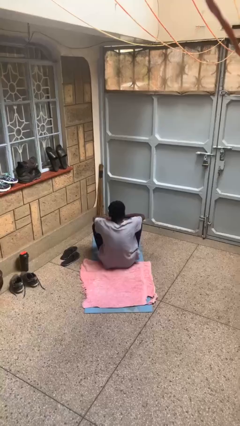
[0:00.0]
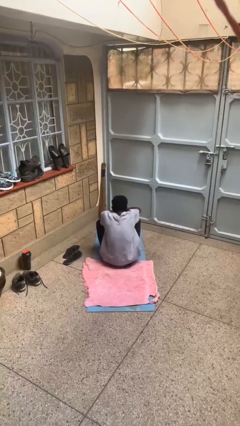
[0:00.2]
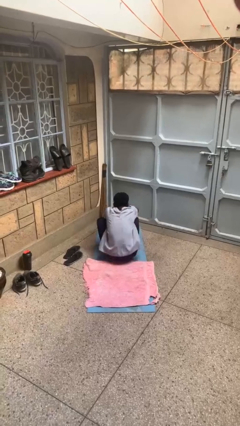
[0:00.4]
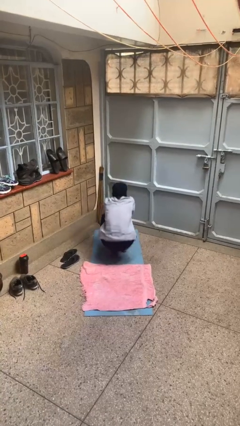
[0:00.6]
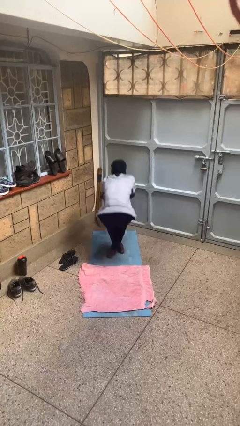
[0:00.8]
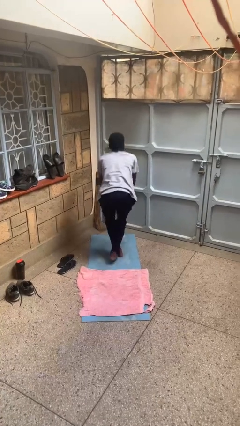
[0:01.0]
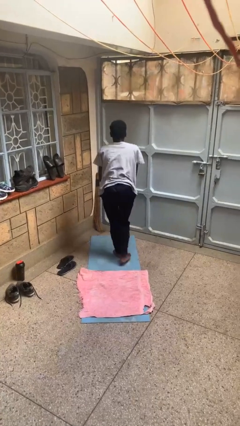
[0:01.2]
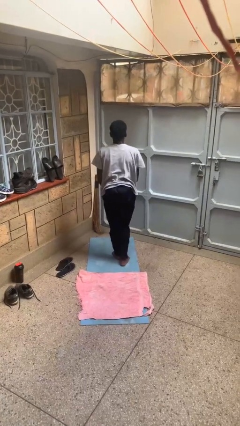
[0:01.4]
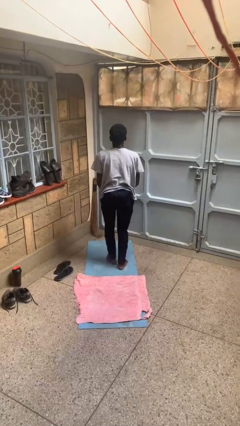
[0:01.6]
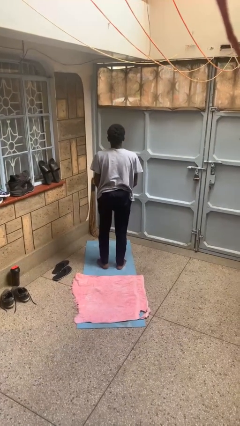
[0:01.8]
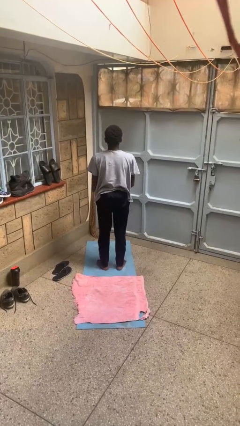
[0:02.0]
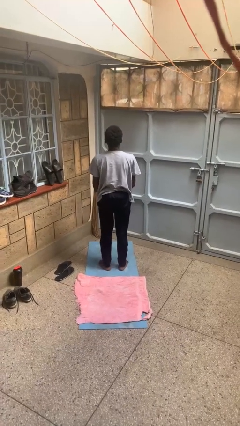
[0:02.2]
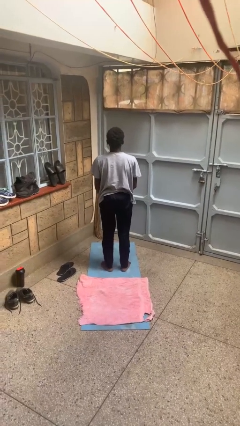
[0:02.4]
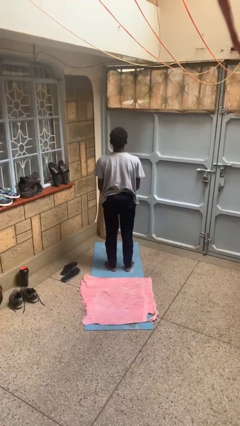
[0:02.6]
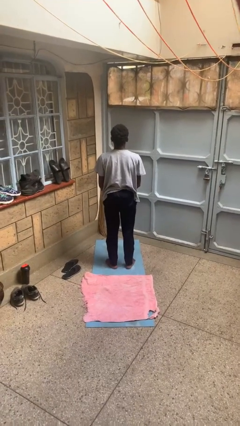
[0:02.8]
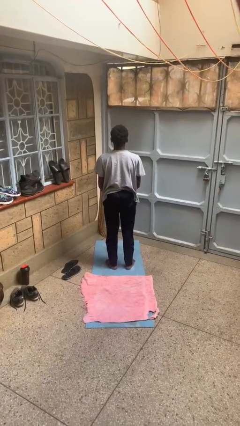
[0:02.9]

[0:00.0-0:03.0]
person stands up from floor

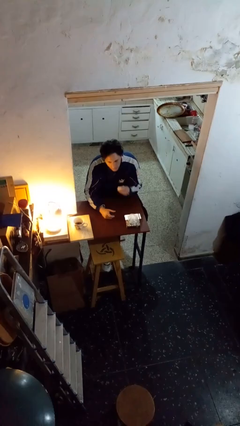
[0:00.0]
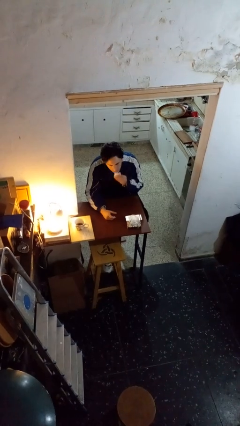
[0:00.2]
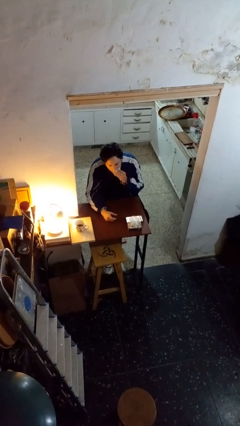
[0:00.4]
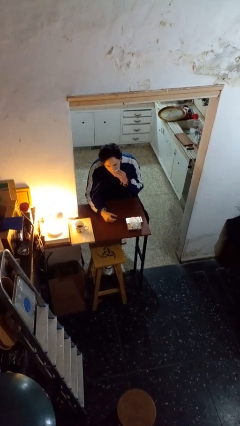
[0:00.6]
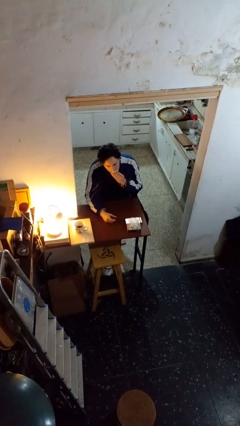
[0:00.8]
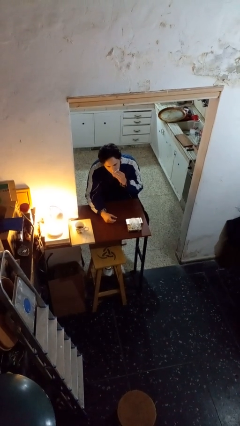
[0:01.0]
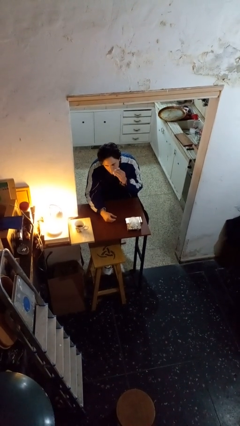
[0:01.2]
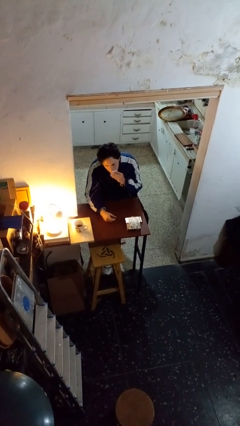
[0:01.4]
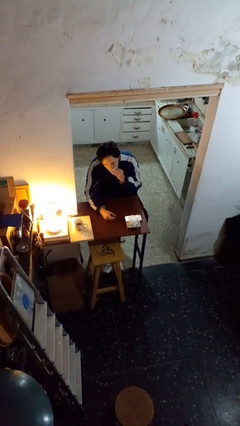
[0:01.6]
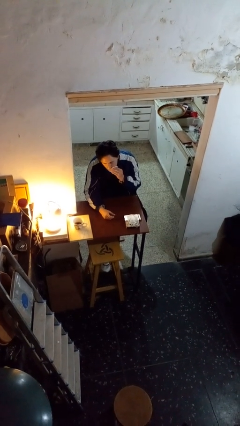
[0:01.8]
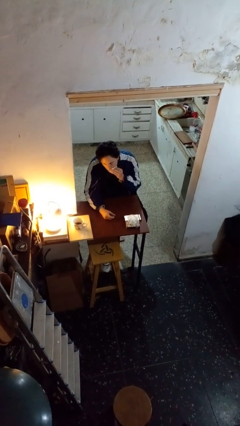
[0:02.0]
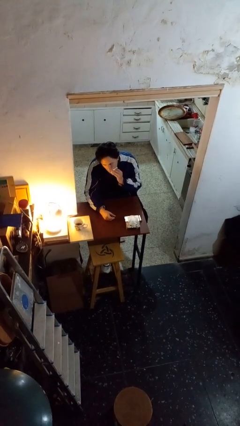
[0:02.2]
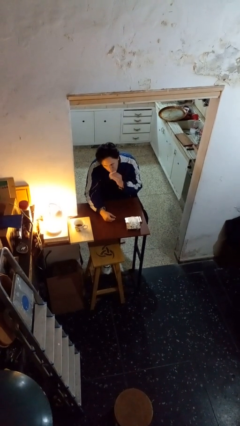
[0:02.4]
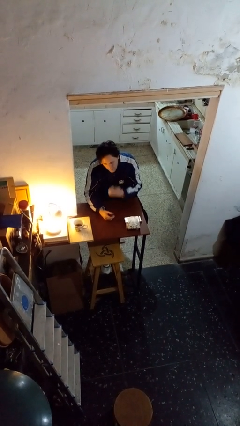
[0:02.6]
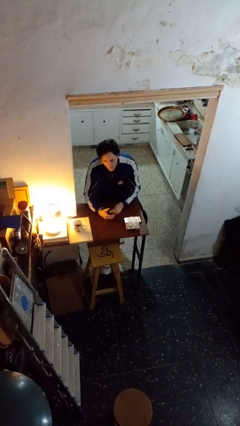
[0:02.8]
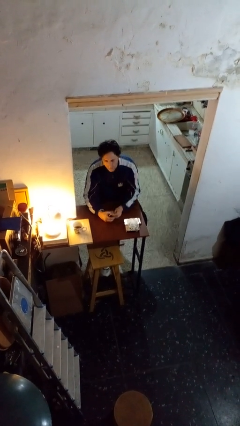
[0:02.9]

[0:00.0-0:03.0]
person wipes mouth with napkin

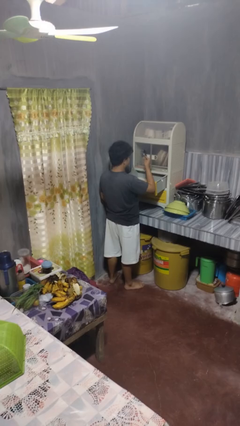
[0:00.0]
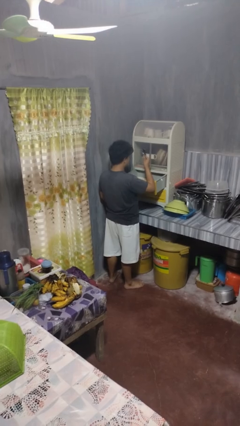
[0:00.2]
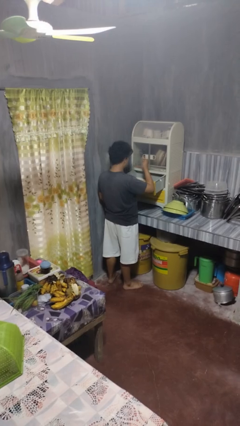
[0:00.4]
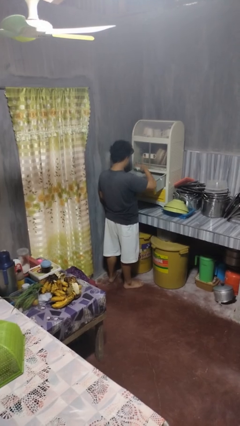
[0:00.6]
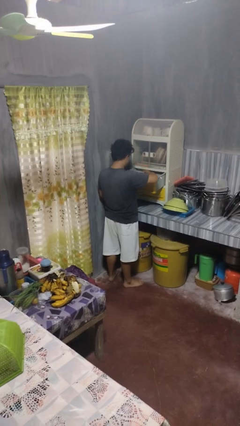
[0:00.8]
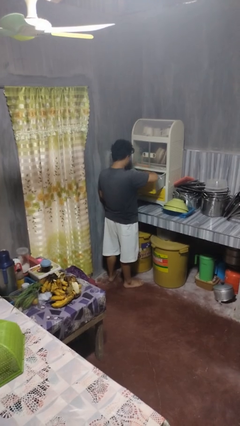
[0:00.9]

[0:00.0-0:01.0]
person puts object into kitchen drawer

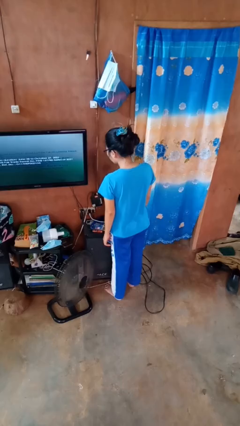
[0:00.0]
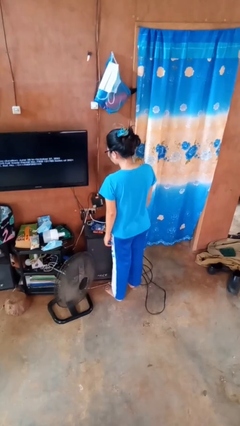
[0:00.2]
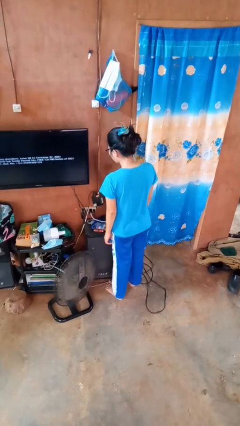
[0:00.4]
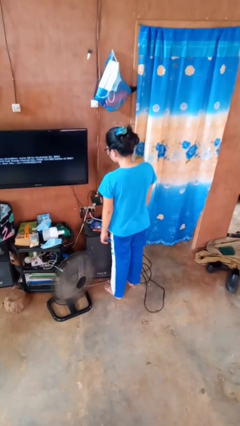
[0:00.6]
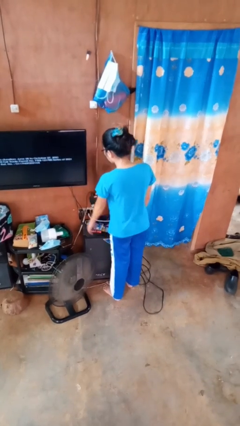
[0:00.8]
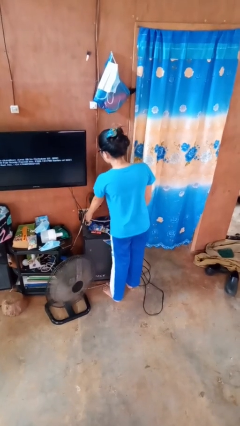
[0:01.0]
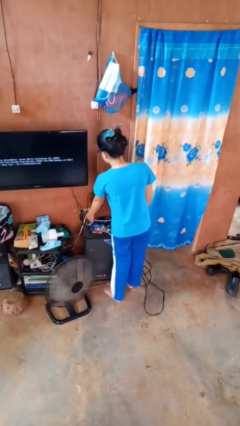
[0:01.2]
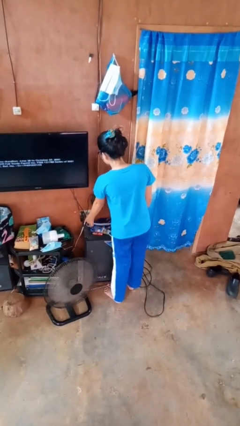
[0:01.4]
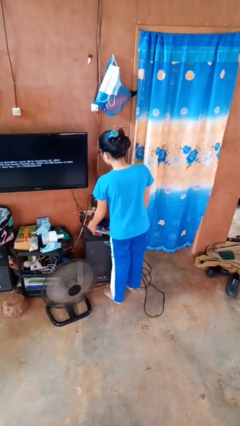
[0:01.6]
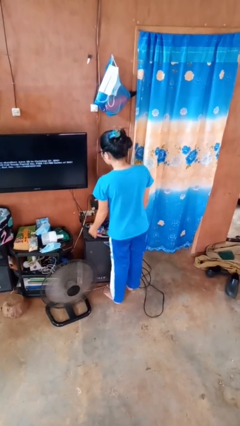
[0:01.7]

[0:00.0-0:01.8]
person unplugs from electrical socket

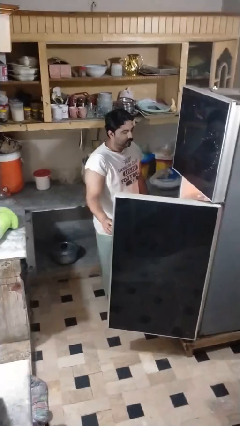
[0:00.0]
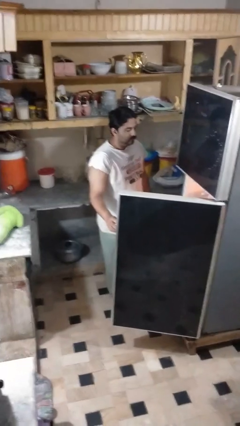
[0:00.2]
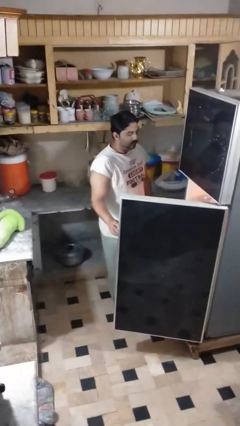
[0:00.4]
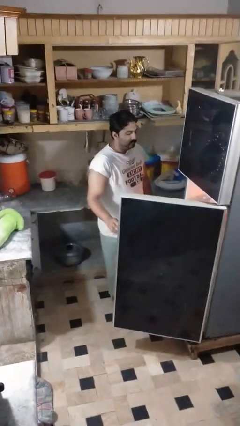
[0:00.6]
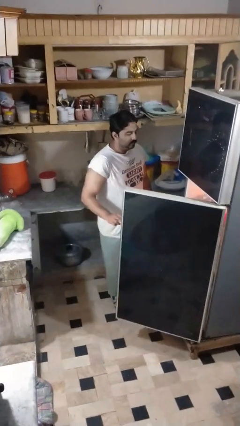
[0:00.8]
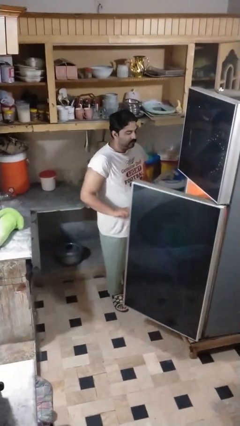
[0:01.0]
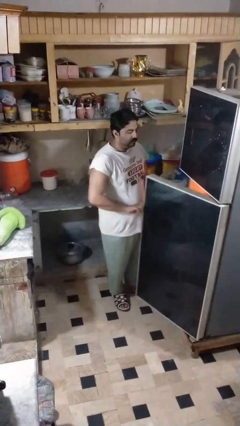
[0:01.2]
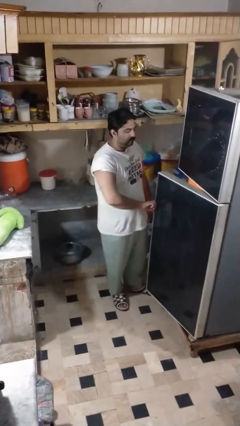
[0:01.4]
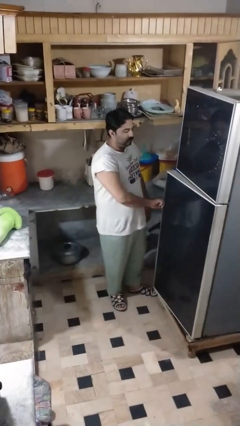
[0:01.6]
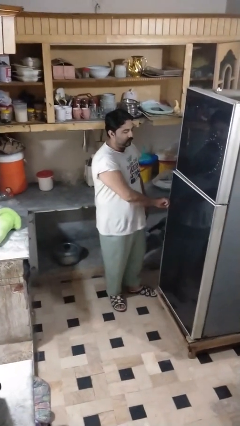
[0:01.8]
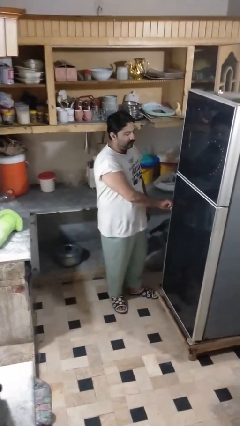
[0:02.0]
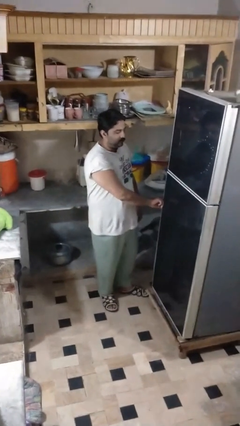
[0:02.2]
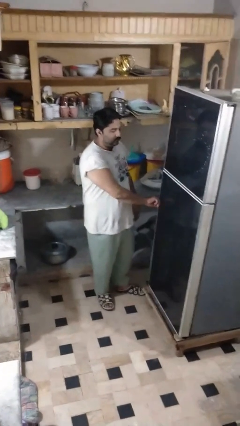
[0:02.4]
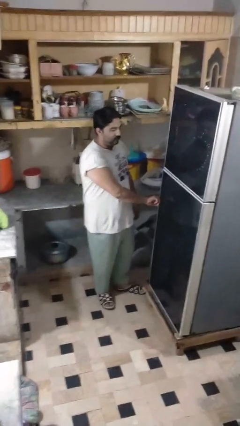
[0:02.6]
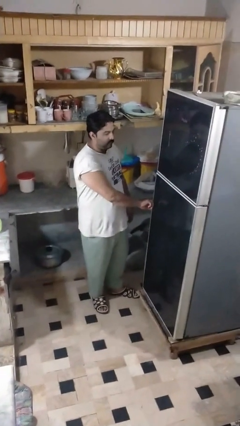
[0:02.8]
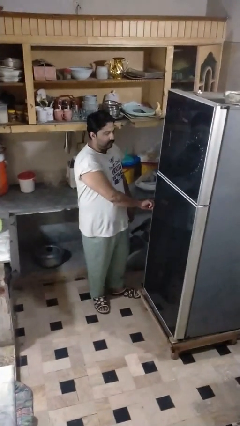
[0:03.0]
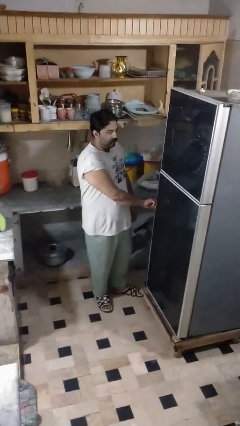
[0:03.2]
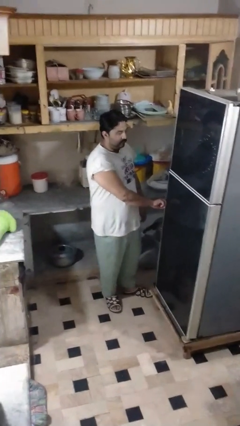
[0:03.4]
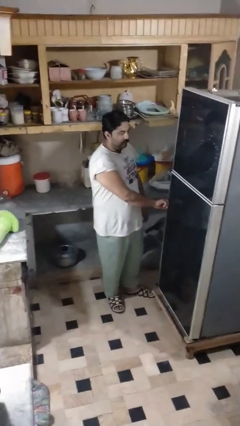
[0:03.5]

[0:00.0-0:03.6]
person closes refrigerator

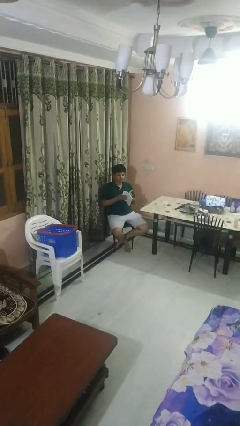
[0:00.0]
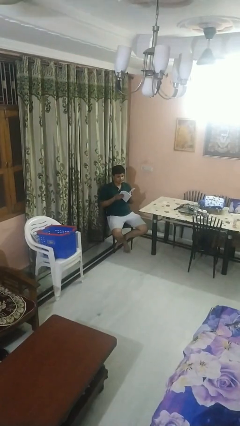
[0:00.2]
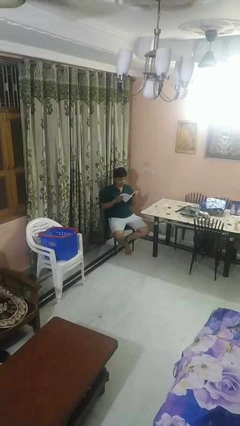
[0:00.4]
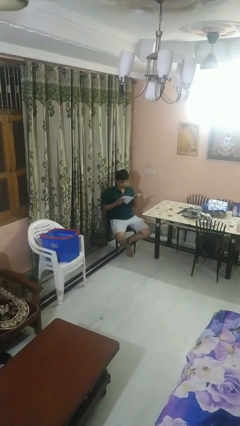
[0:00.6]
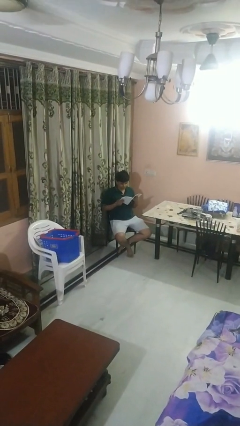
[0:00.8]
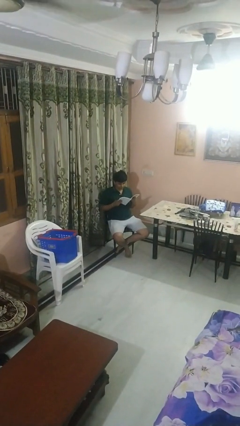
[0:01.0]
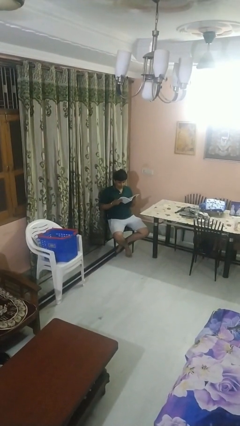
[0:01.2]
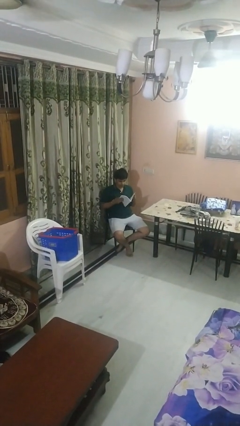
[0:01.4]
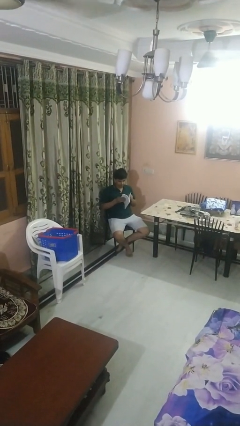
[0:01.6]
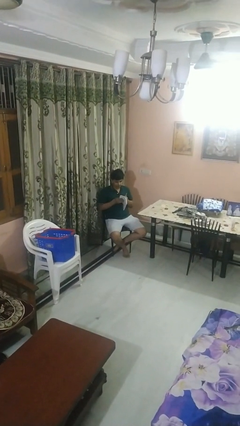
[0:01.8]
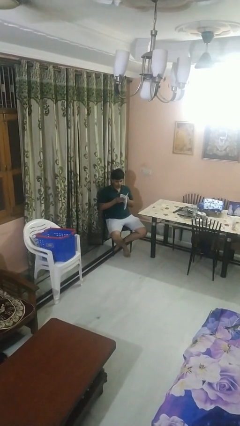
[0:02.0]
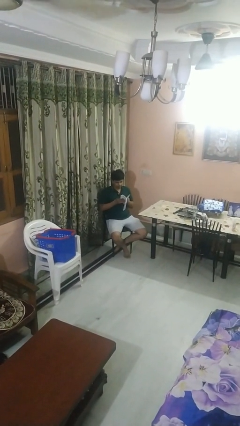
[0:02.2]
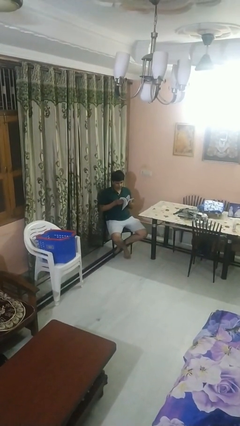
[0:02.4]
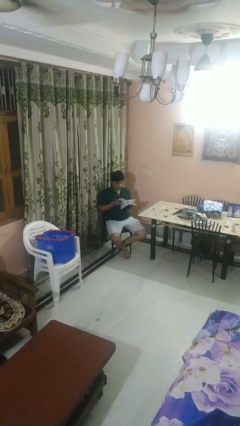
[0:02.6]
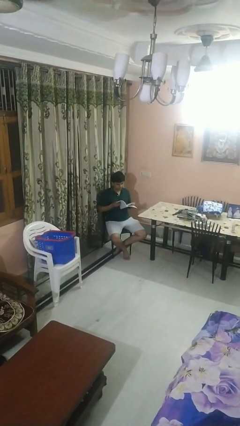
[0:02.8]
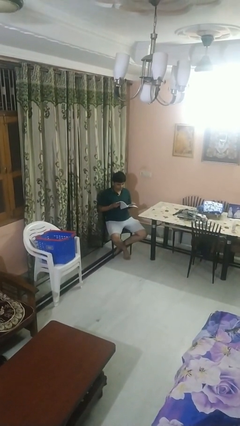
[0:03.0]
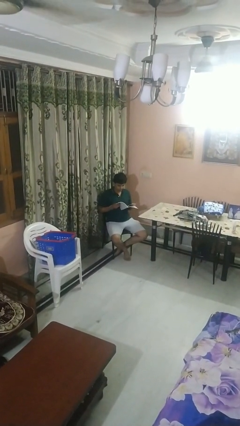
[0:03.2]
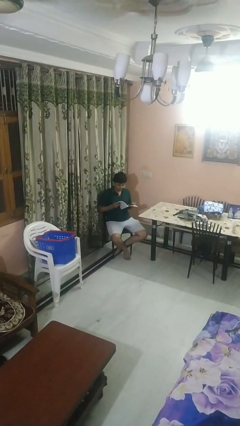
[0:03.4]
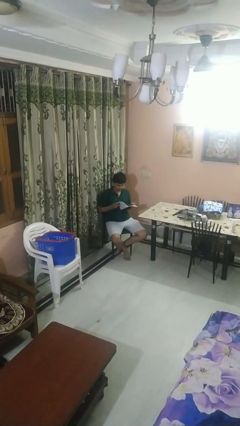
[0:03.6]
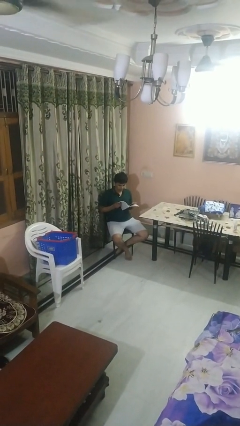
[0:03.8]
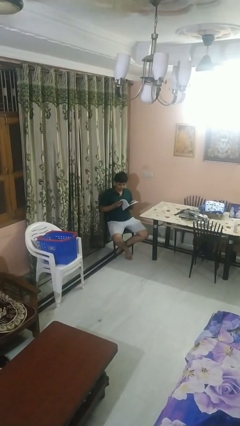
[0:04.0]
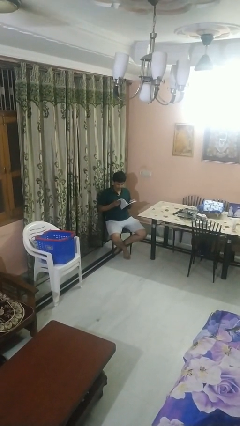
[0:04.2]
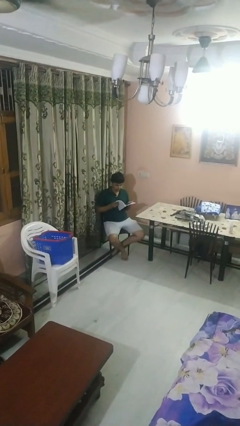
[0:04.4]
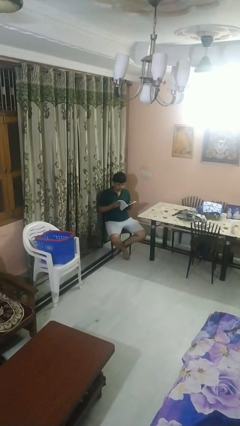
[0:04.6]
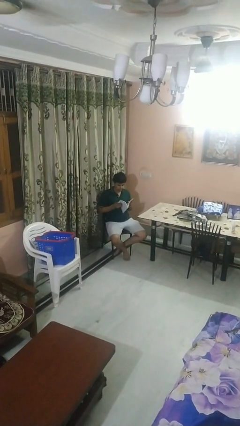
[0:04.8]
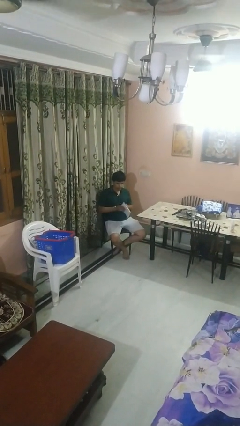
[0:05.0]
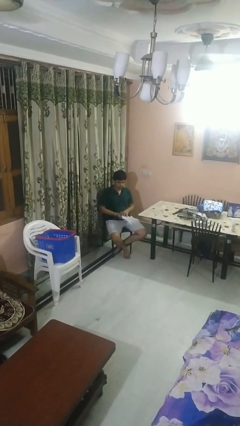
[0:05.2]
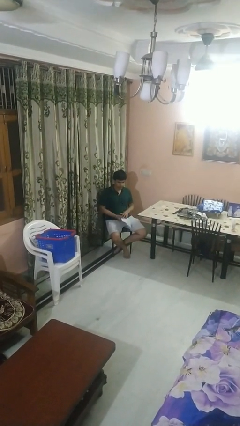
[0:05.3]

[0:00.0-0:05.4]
person reads magazine
